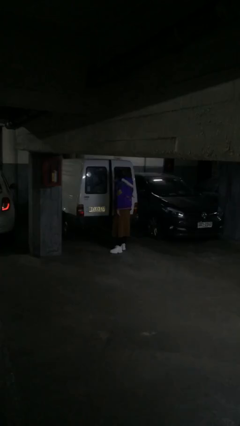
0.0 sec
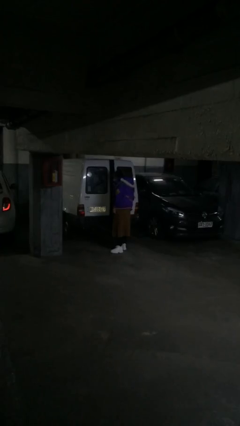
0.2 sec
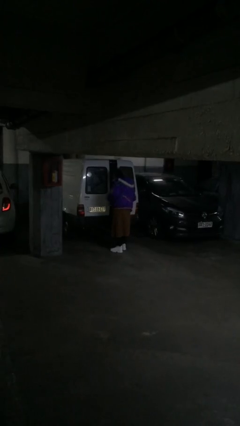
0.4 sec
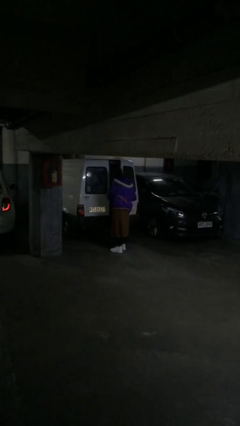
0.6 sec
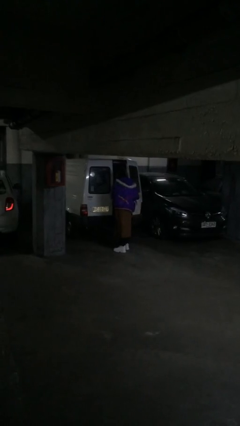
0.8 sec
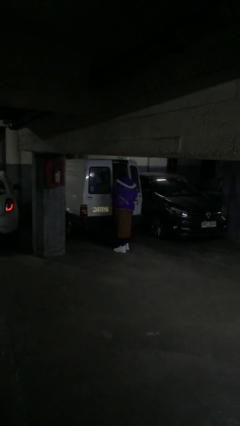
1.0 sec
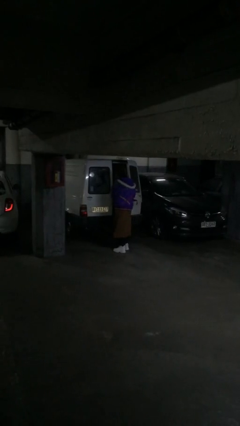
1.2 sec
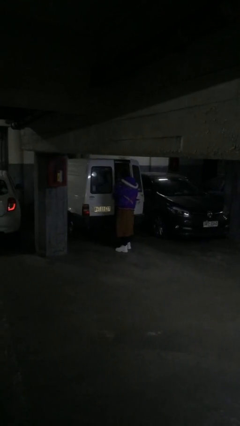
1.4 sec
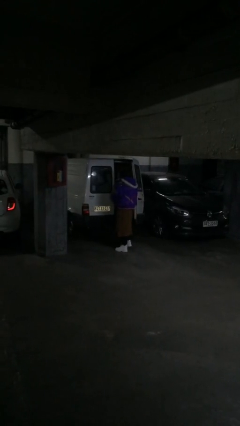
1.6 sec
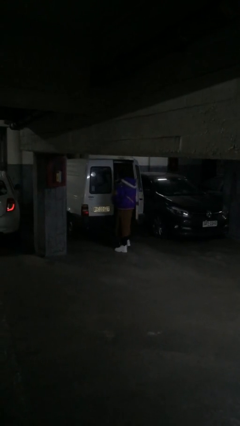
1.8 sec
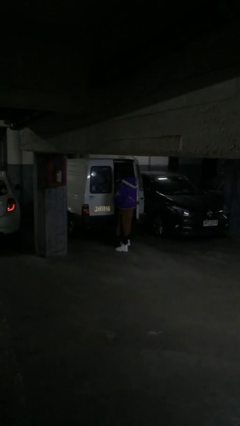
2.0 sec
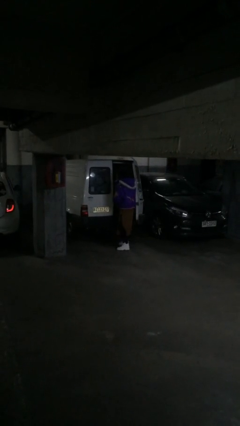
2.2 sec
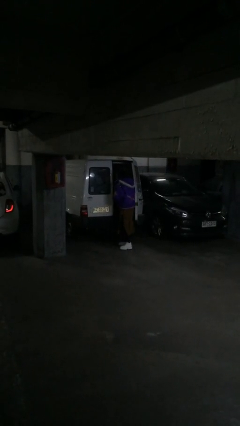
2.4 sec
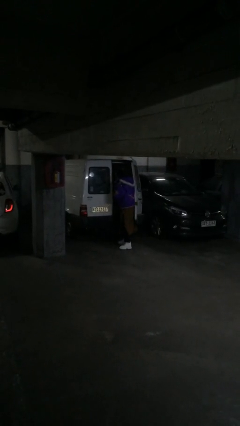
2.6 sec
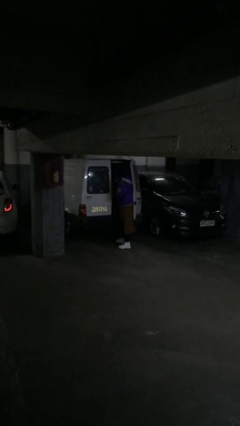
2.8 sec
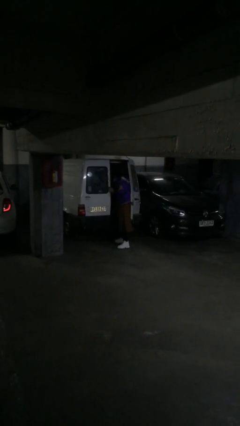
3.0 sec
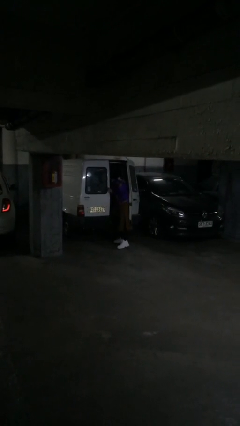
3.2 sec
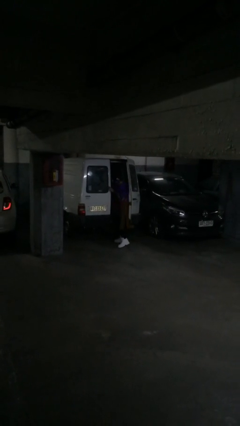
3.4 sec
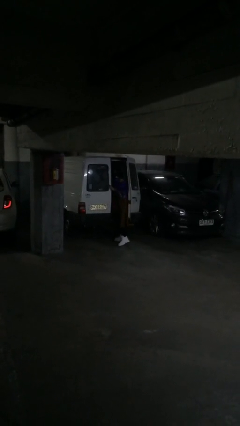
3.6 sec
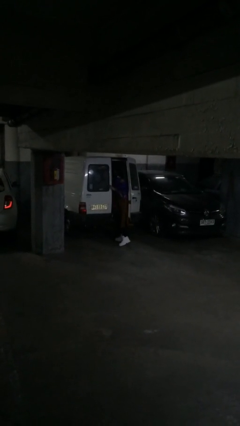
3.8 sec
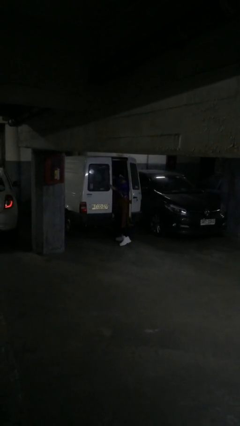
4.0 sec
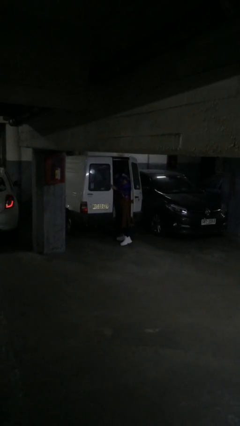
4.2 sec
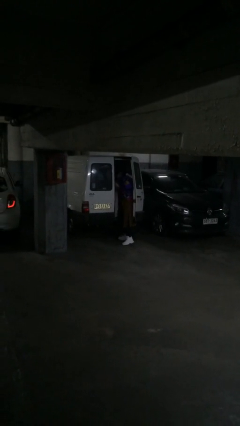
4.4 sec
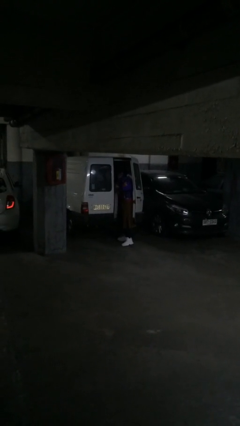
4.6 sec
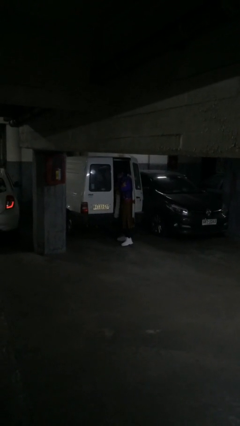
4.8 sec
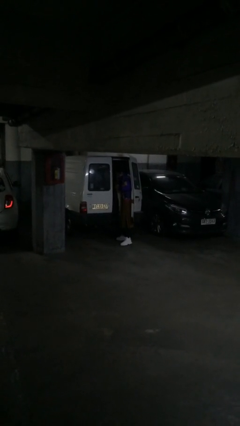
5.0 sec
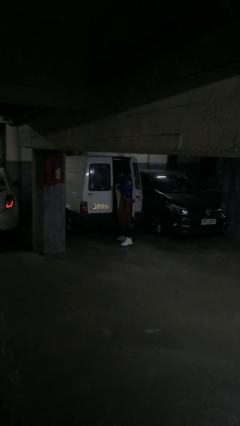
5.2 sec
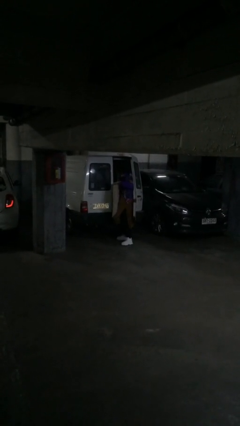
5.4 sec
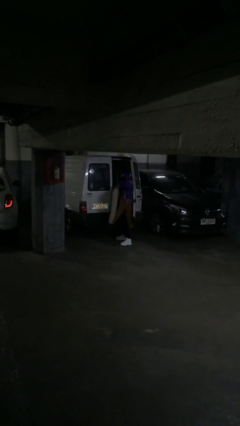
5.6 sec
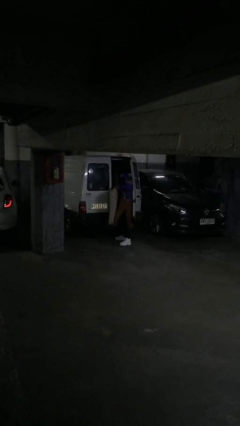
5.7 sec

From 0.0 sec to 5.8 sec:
person opens car door

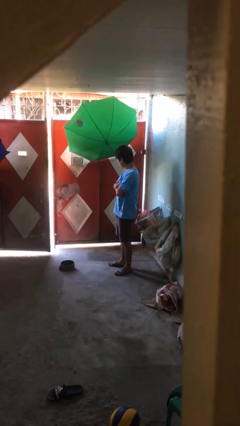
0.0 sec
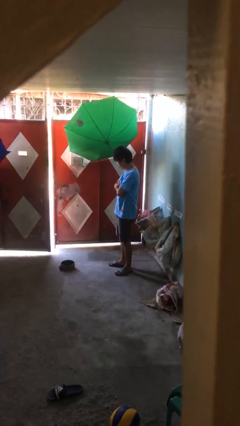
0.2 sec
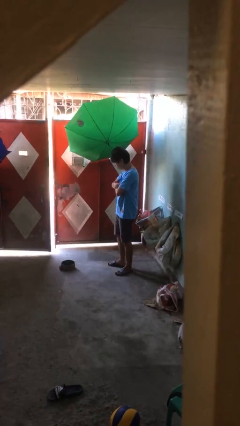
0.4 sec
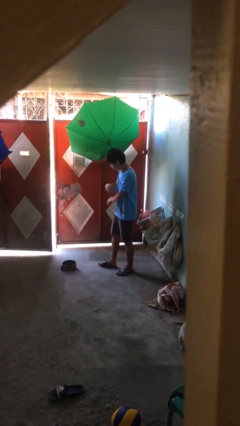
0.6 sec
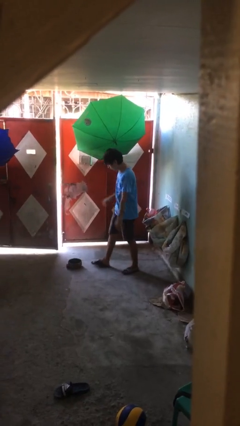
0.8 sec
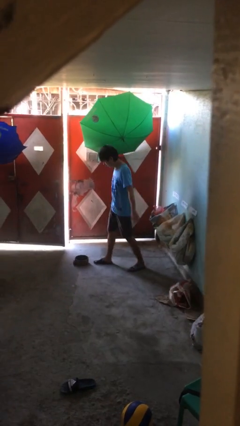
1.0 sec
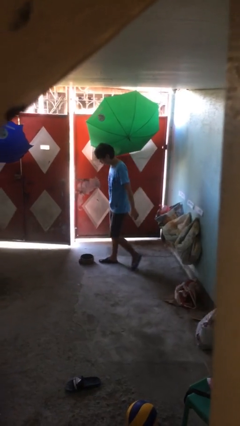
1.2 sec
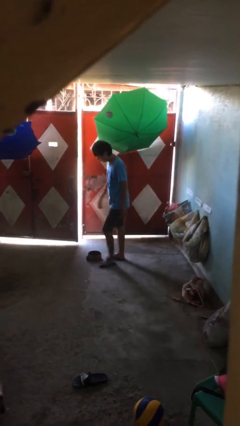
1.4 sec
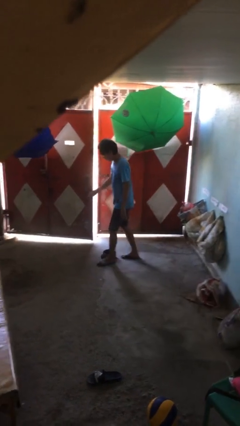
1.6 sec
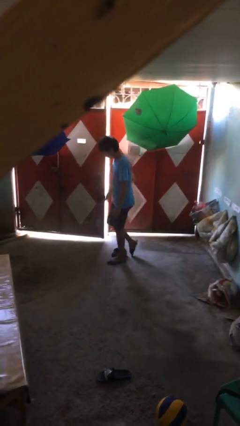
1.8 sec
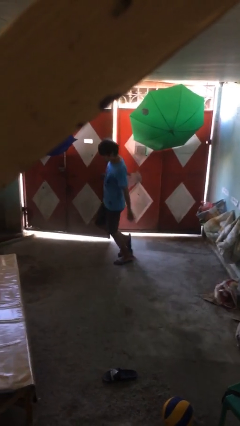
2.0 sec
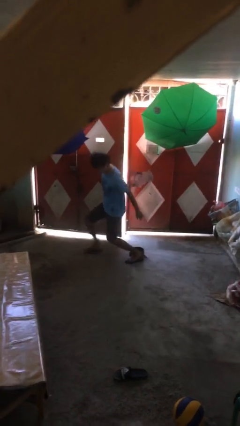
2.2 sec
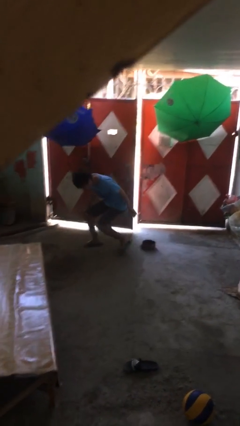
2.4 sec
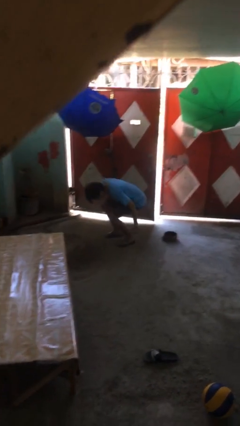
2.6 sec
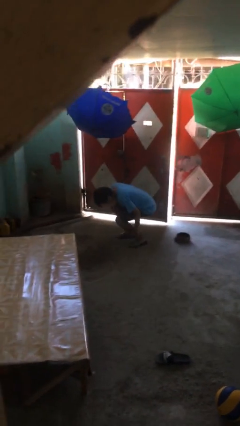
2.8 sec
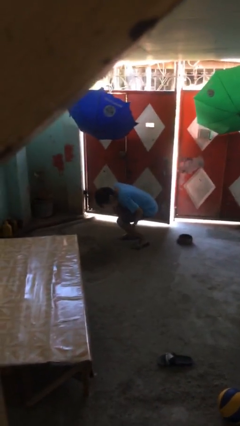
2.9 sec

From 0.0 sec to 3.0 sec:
person trips on object on floor

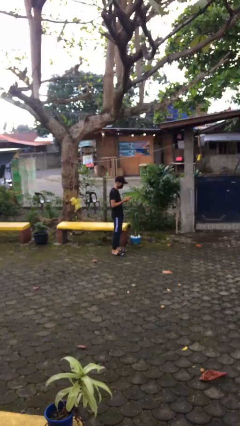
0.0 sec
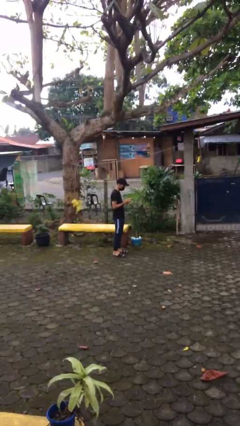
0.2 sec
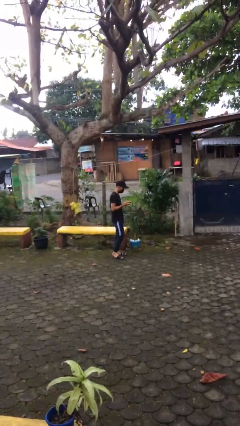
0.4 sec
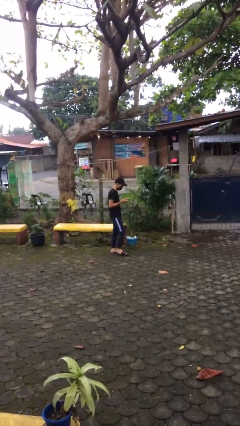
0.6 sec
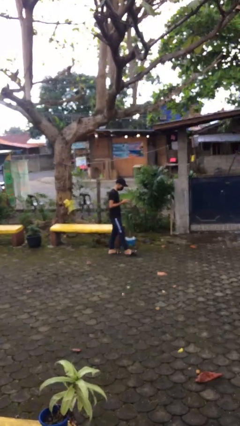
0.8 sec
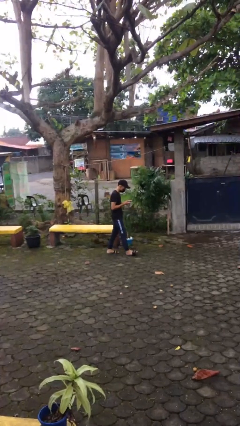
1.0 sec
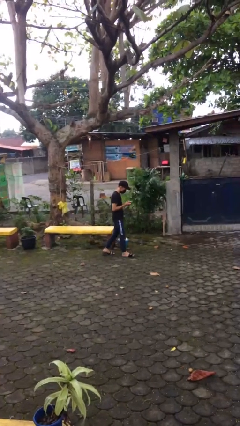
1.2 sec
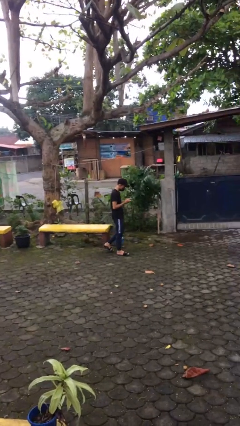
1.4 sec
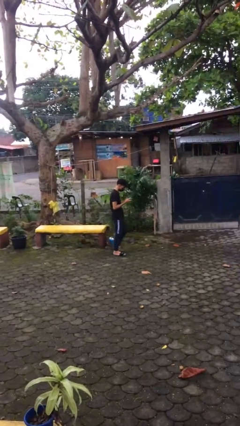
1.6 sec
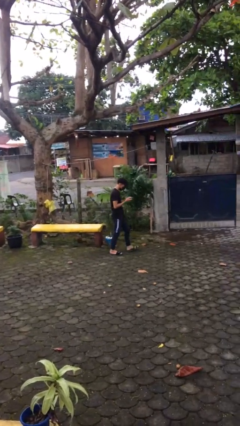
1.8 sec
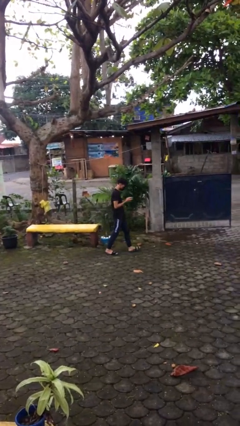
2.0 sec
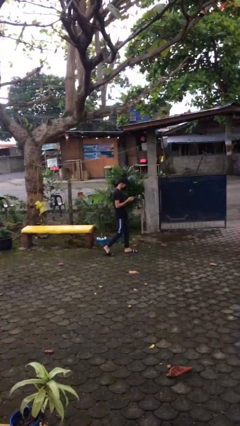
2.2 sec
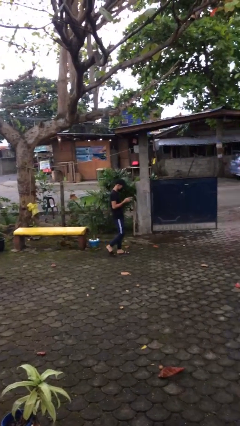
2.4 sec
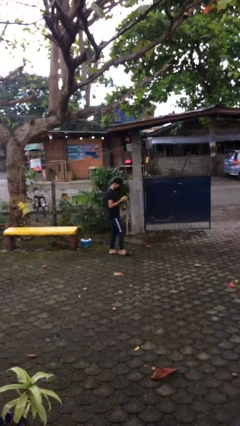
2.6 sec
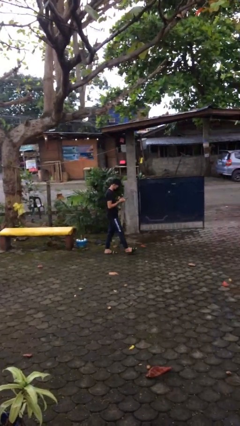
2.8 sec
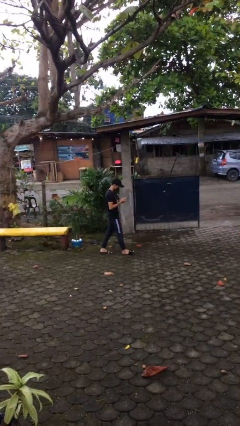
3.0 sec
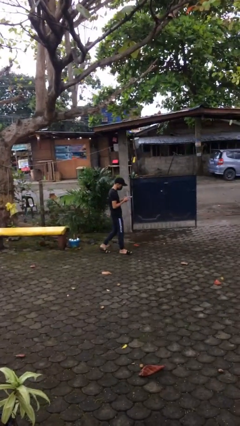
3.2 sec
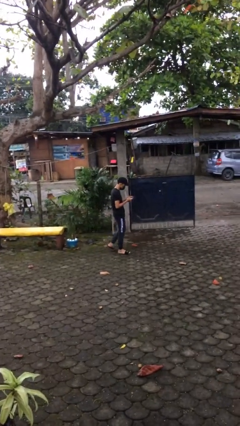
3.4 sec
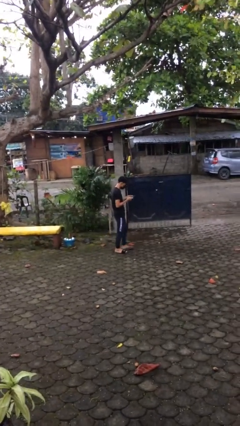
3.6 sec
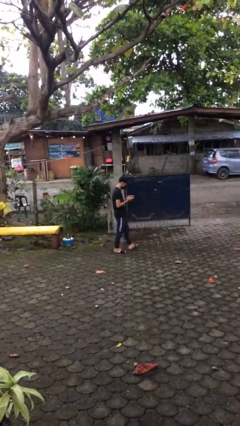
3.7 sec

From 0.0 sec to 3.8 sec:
person texts on phone

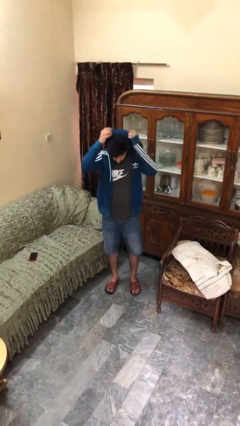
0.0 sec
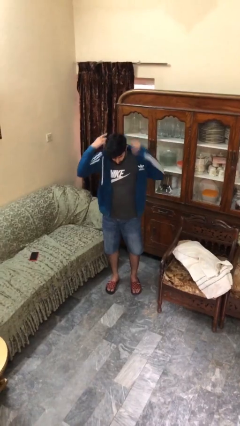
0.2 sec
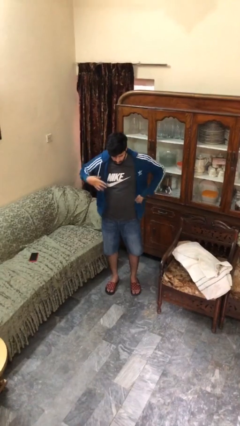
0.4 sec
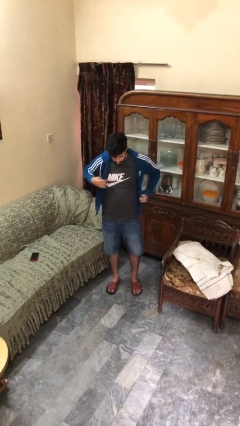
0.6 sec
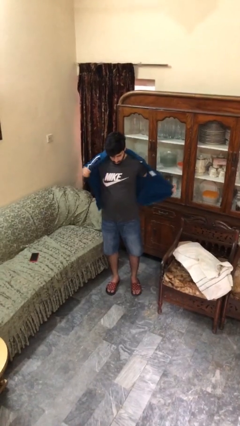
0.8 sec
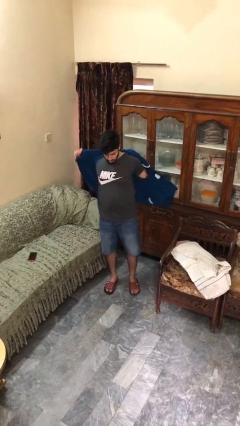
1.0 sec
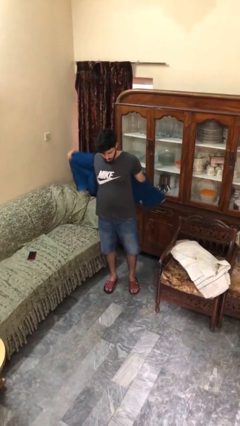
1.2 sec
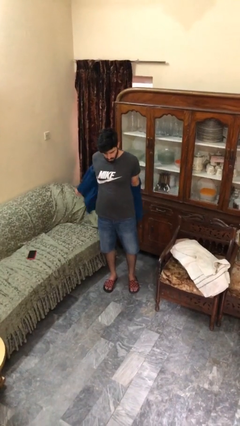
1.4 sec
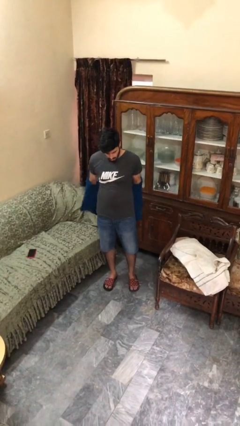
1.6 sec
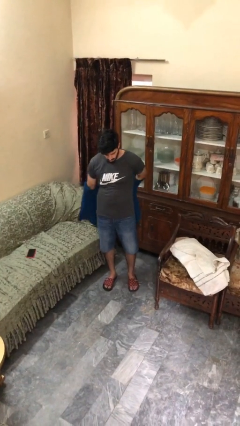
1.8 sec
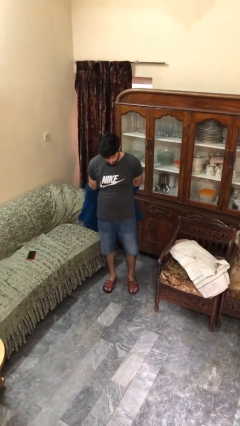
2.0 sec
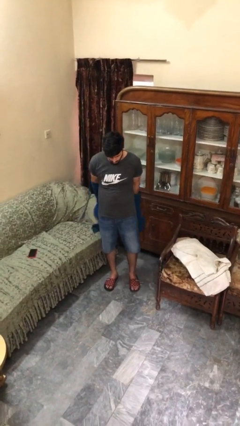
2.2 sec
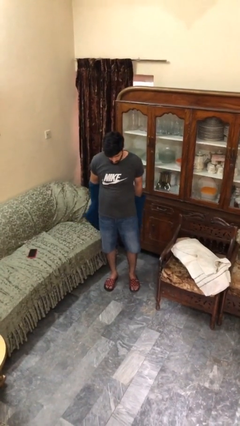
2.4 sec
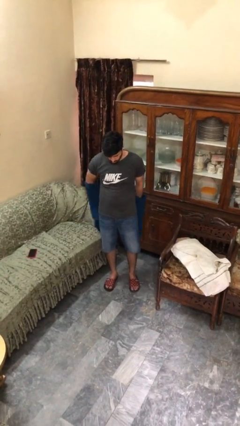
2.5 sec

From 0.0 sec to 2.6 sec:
person takes off hoodie

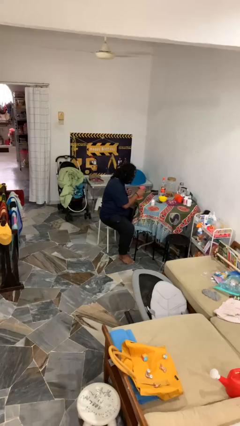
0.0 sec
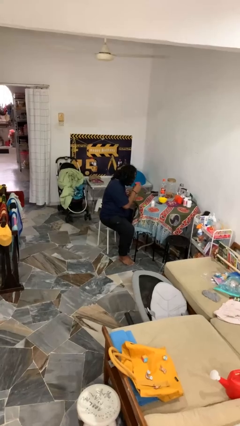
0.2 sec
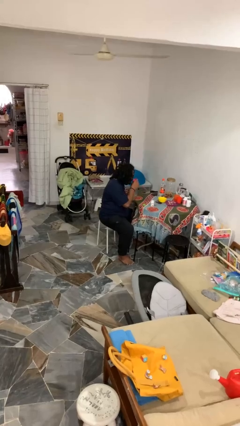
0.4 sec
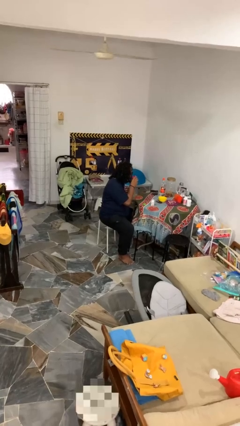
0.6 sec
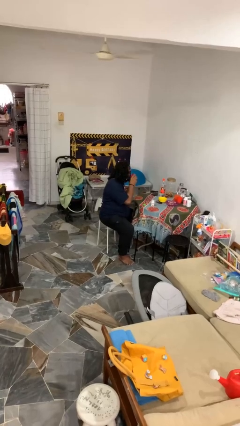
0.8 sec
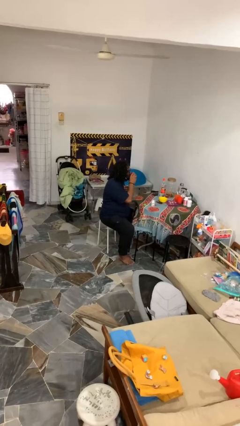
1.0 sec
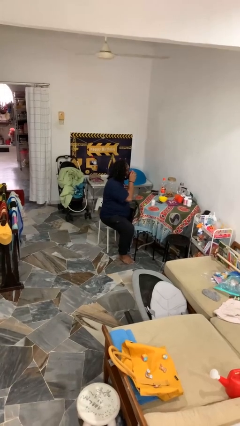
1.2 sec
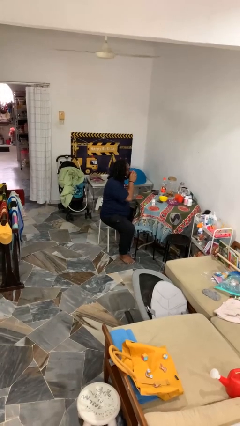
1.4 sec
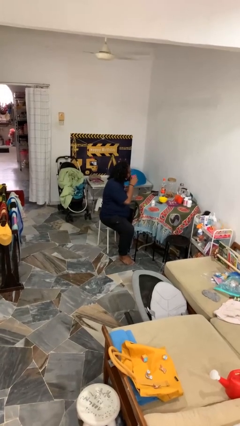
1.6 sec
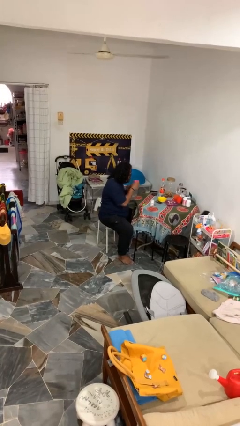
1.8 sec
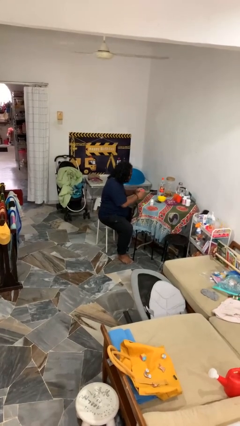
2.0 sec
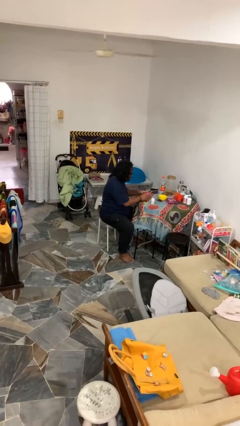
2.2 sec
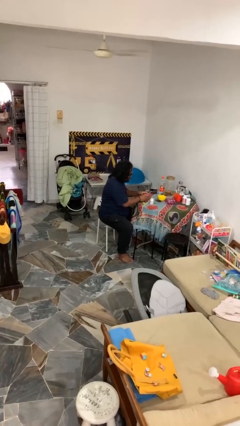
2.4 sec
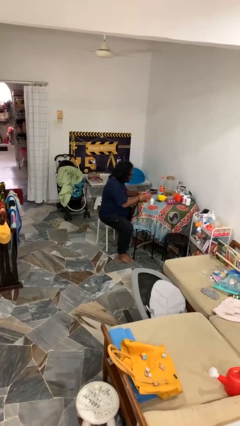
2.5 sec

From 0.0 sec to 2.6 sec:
person drinks from cup
